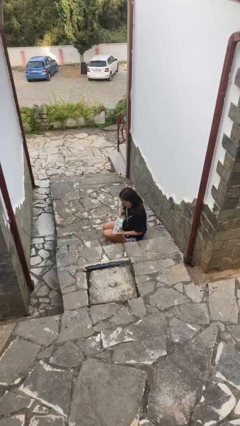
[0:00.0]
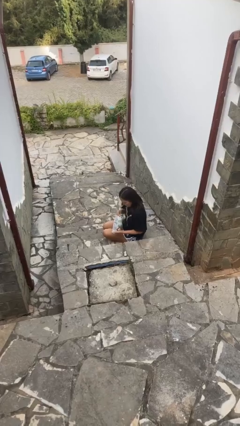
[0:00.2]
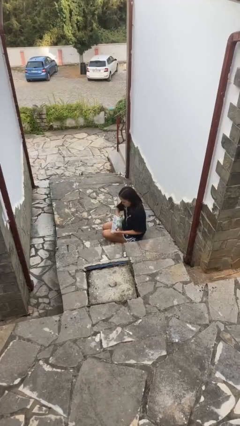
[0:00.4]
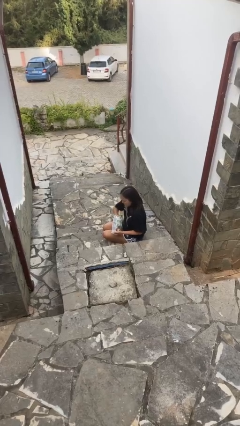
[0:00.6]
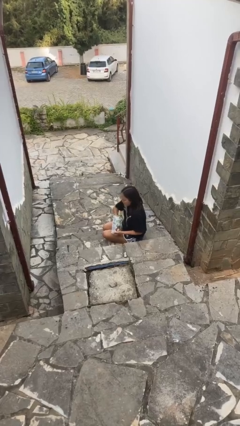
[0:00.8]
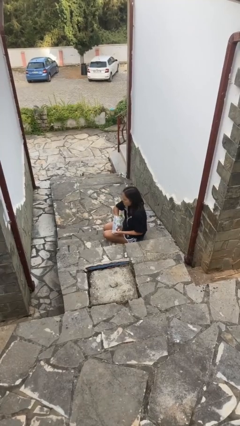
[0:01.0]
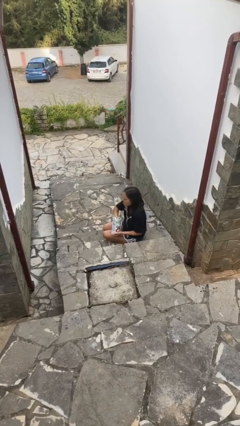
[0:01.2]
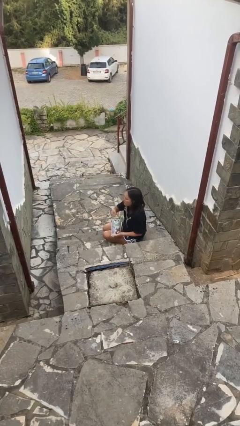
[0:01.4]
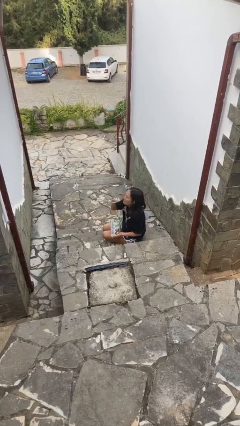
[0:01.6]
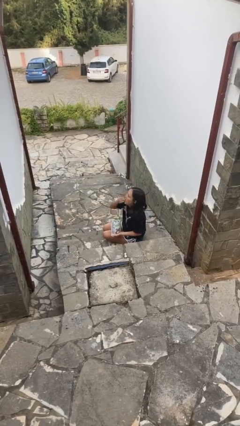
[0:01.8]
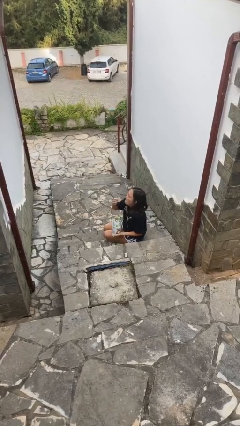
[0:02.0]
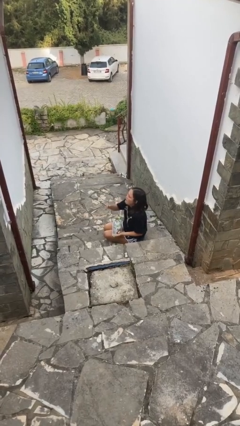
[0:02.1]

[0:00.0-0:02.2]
person eats snack from bag

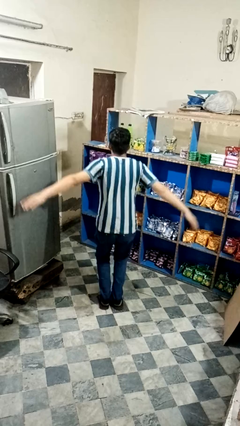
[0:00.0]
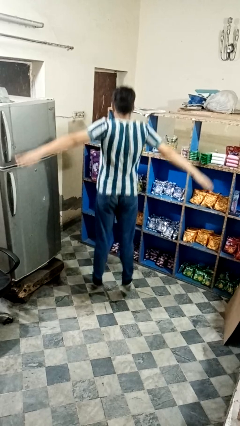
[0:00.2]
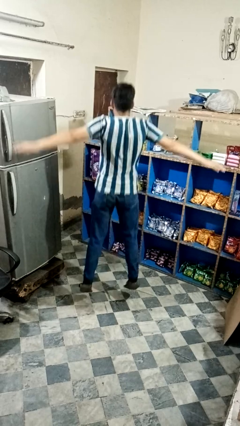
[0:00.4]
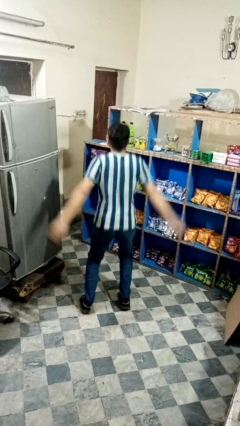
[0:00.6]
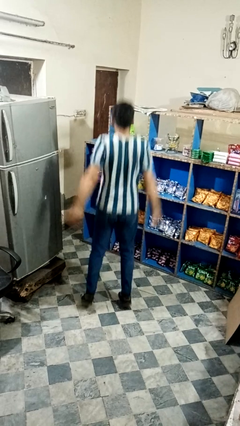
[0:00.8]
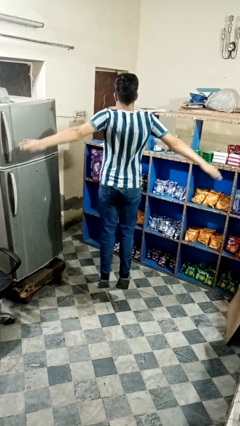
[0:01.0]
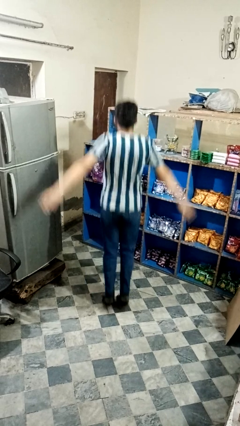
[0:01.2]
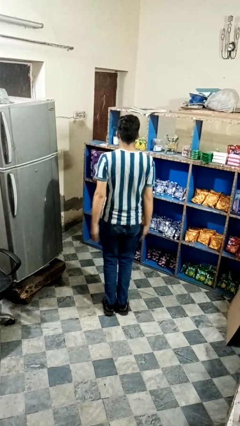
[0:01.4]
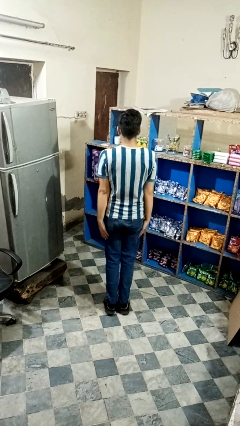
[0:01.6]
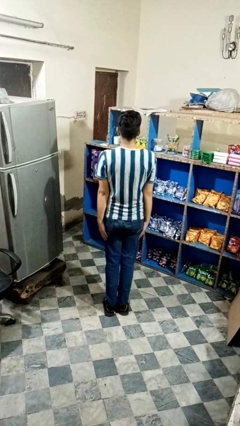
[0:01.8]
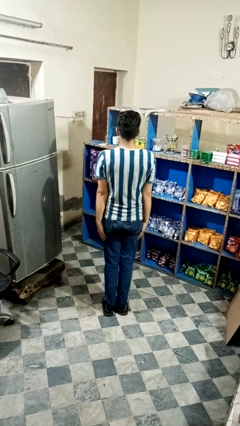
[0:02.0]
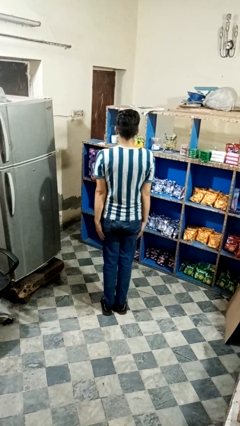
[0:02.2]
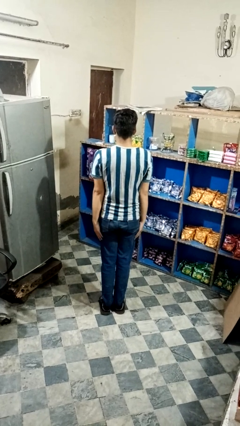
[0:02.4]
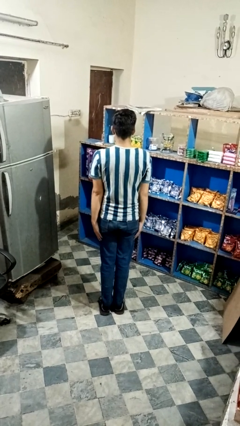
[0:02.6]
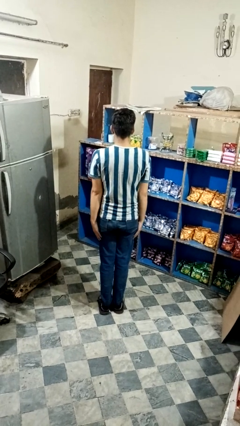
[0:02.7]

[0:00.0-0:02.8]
person exercises with jumping jacks

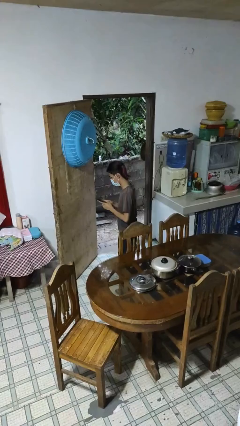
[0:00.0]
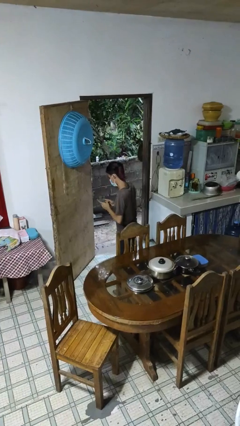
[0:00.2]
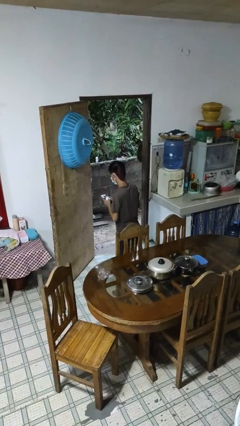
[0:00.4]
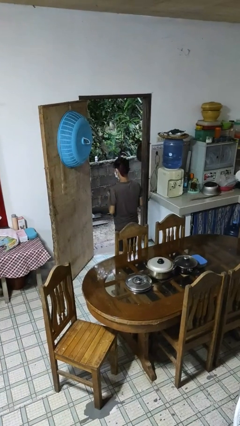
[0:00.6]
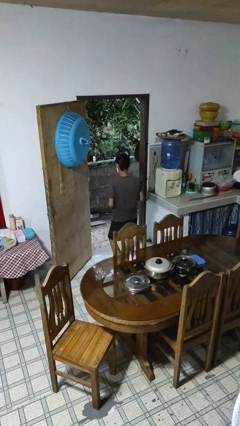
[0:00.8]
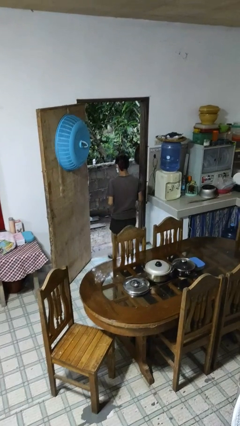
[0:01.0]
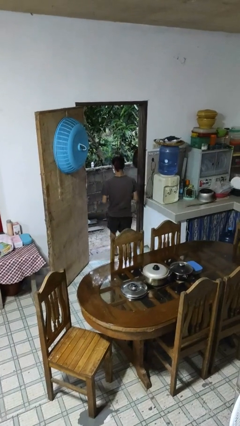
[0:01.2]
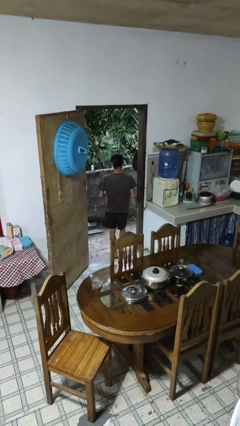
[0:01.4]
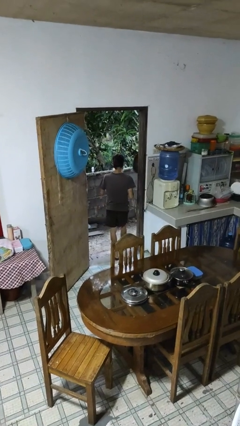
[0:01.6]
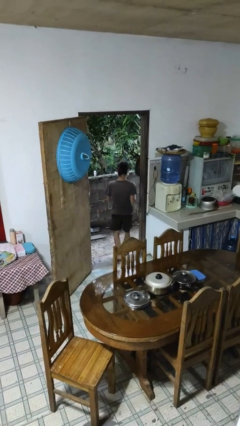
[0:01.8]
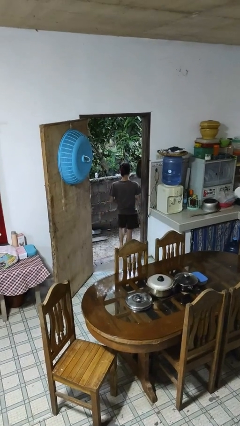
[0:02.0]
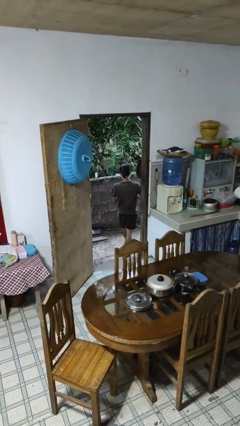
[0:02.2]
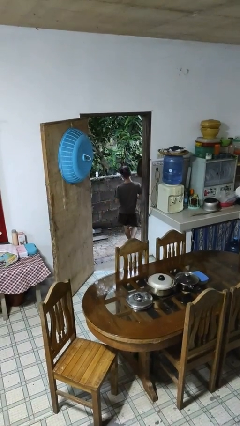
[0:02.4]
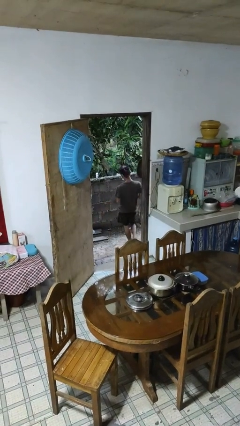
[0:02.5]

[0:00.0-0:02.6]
person exits scene through structure

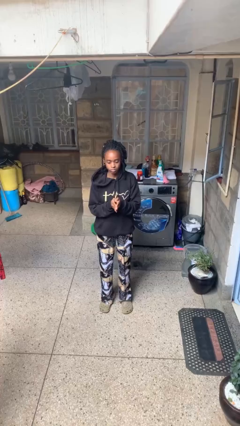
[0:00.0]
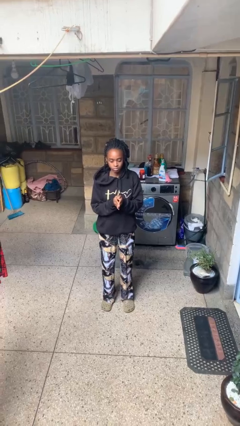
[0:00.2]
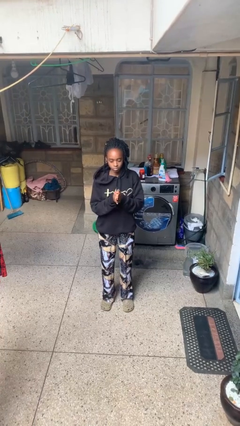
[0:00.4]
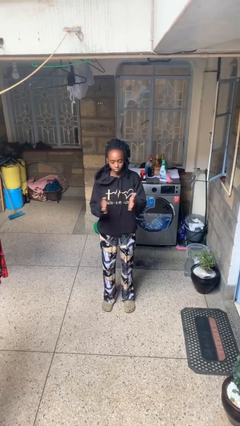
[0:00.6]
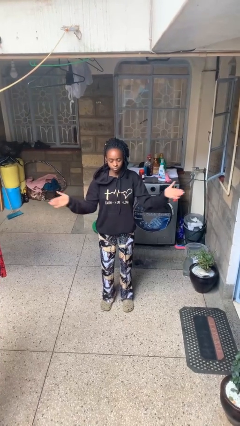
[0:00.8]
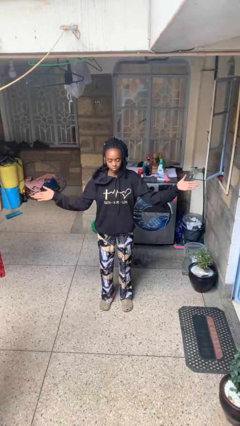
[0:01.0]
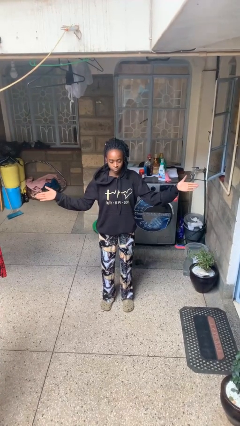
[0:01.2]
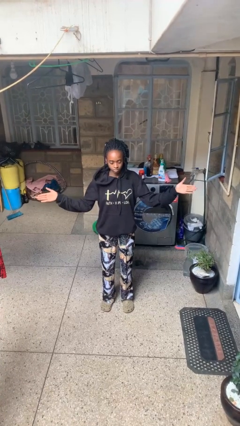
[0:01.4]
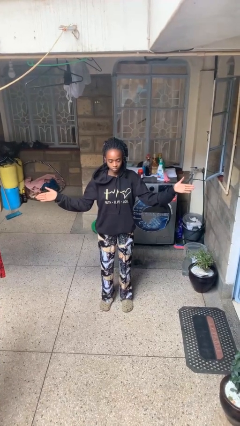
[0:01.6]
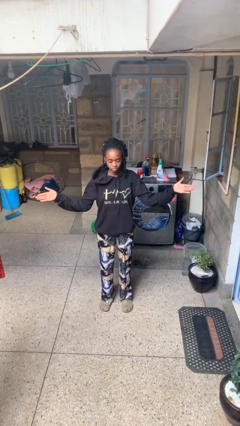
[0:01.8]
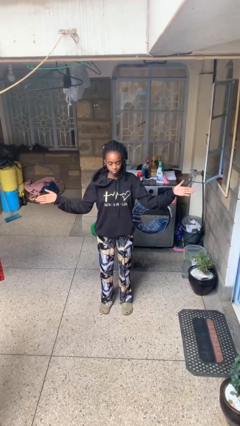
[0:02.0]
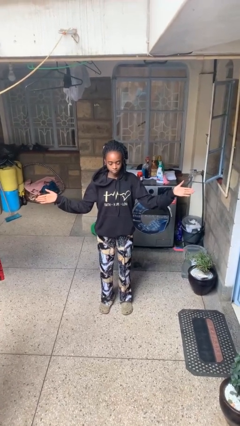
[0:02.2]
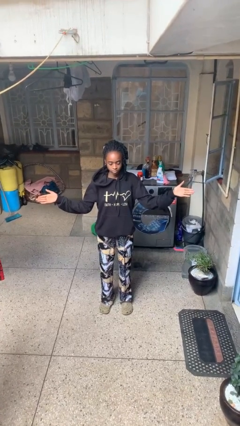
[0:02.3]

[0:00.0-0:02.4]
person gestures zoom in

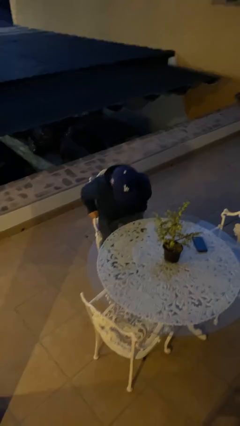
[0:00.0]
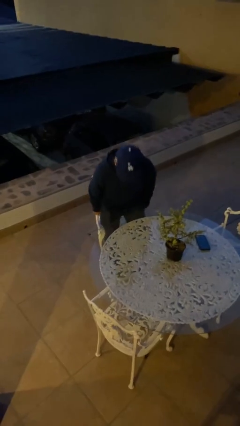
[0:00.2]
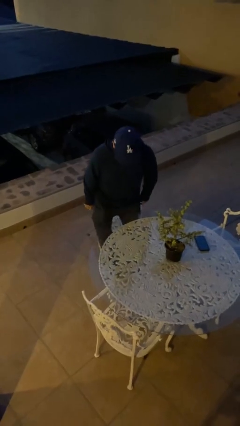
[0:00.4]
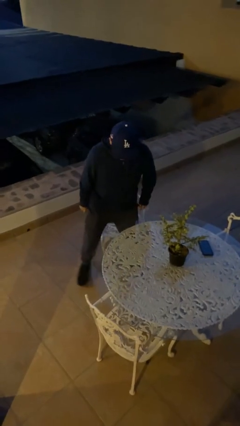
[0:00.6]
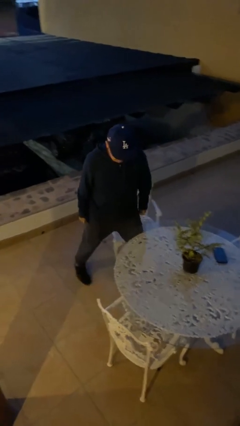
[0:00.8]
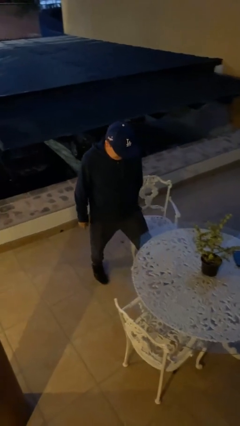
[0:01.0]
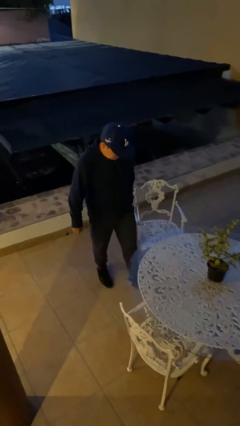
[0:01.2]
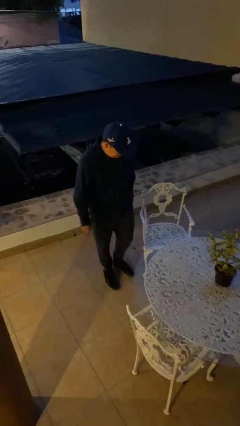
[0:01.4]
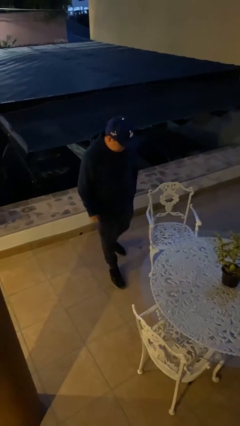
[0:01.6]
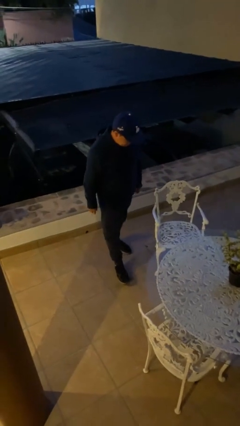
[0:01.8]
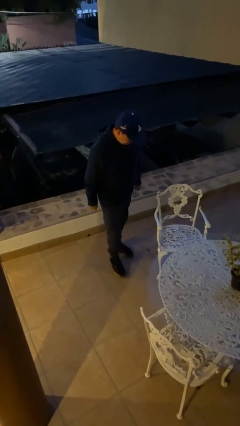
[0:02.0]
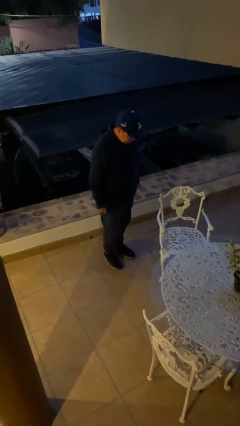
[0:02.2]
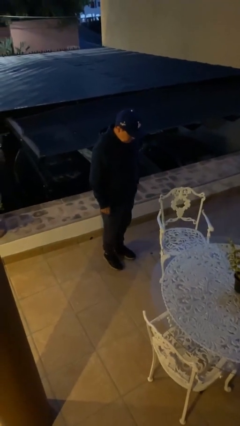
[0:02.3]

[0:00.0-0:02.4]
person stands up

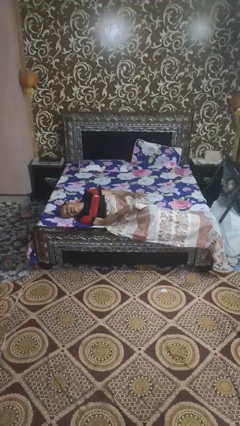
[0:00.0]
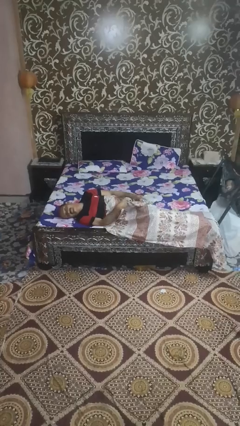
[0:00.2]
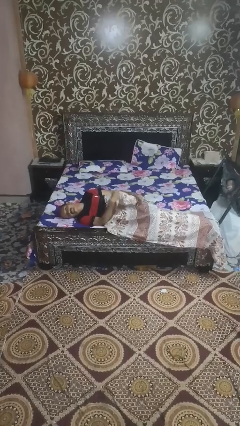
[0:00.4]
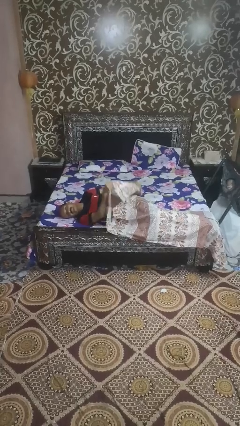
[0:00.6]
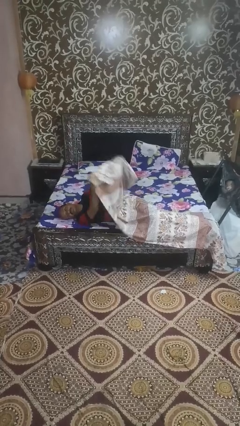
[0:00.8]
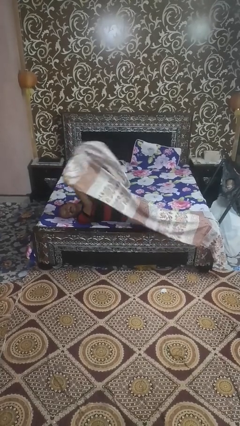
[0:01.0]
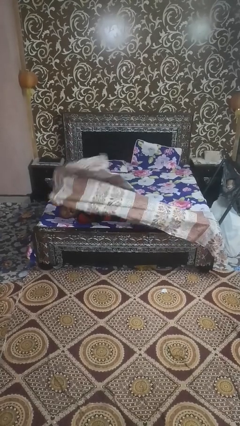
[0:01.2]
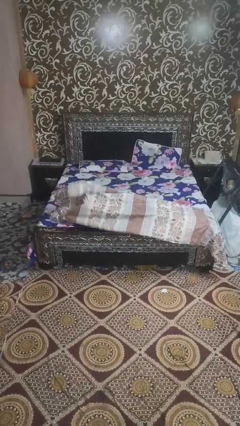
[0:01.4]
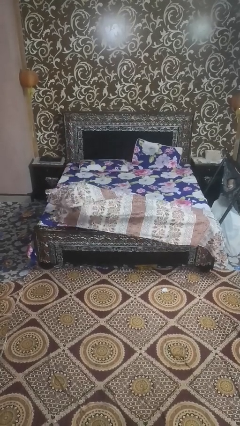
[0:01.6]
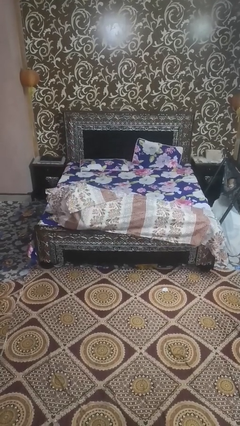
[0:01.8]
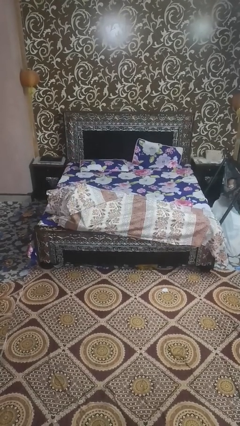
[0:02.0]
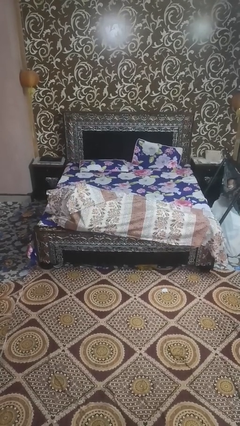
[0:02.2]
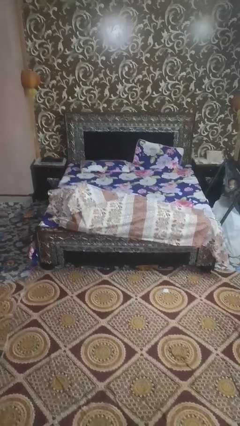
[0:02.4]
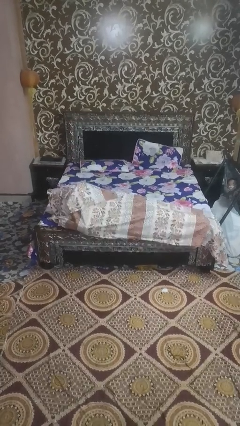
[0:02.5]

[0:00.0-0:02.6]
person covers with bedsheets

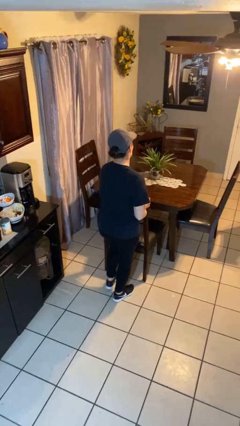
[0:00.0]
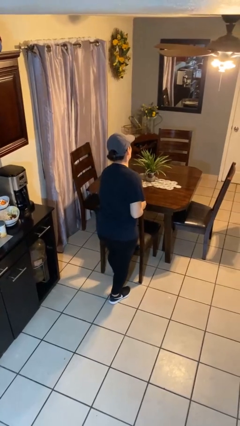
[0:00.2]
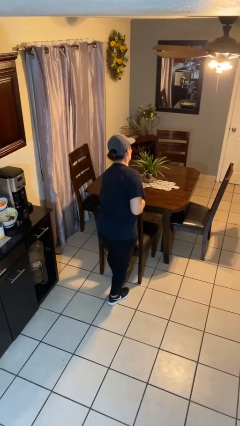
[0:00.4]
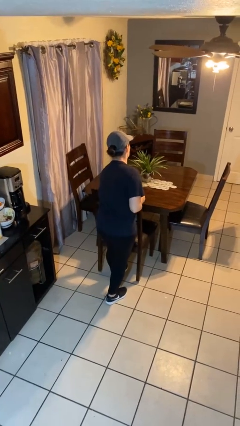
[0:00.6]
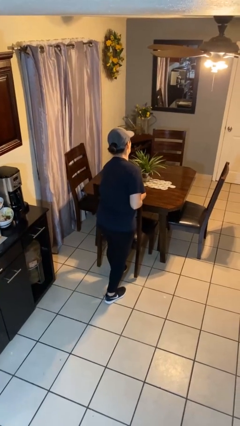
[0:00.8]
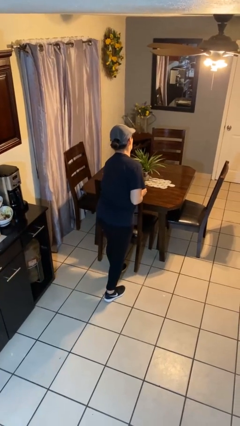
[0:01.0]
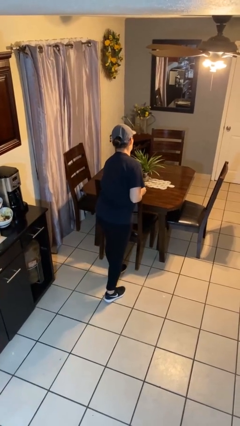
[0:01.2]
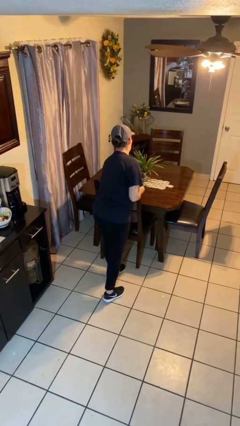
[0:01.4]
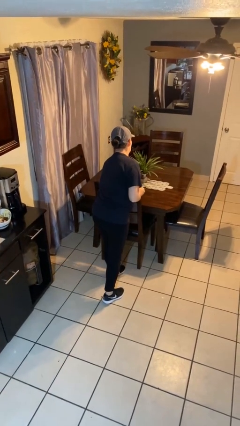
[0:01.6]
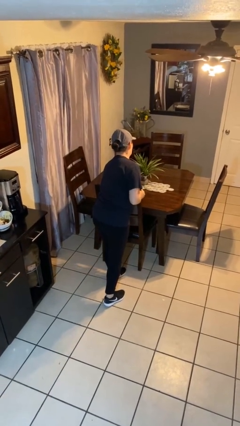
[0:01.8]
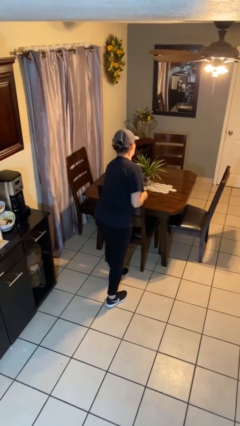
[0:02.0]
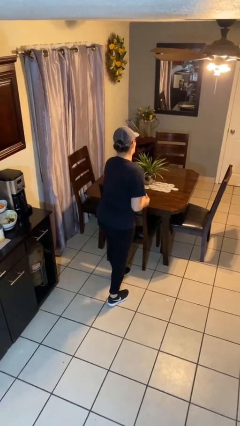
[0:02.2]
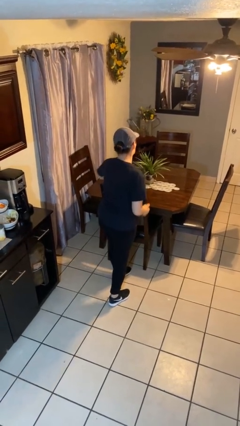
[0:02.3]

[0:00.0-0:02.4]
person pushes in chair
